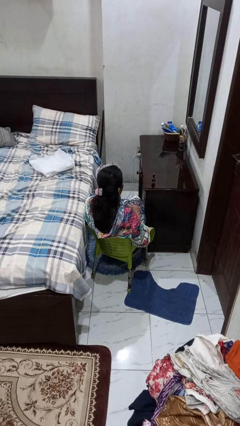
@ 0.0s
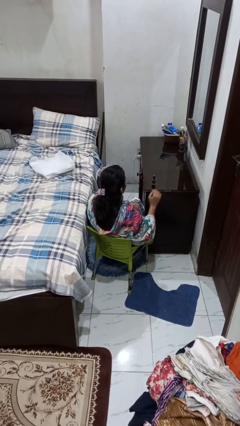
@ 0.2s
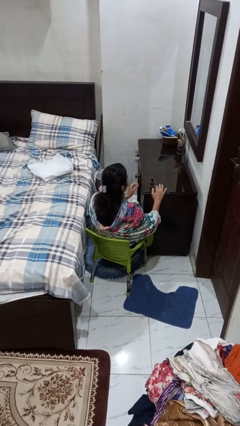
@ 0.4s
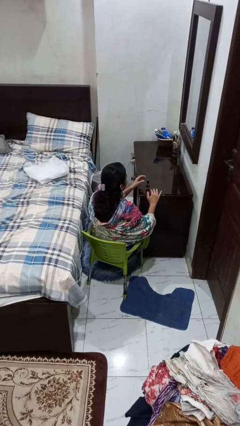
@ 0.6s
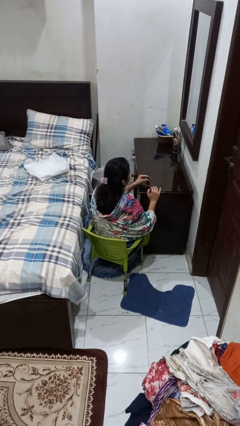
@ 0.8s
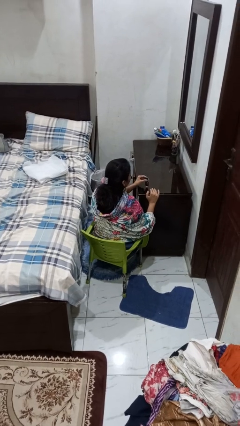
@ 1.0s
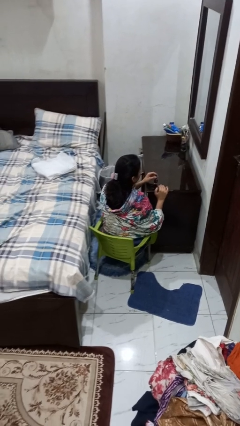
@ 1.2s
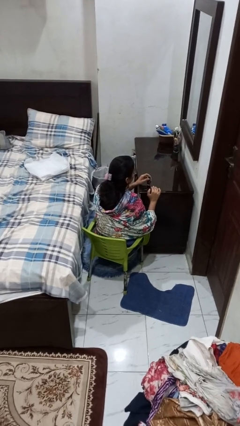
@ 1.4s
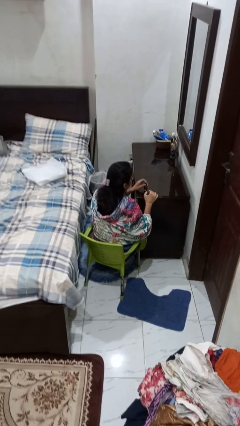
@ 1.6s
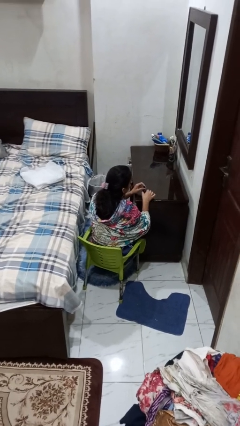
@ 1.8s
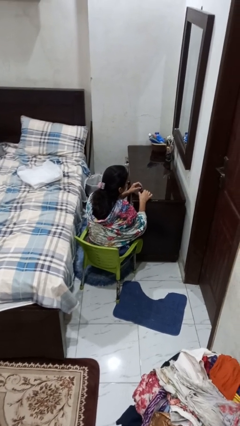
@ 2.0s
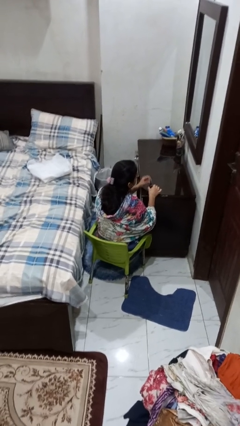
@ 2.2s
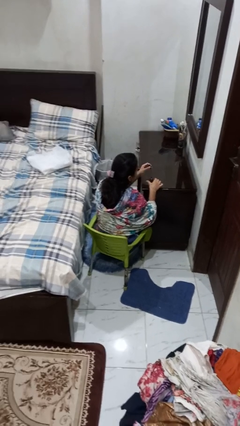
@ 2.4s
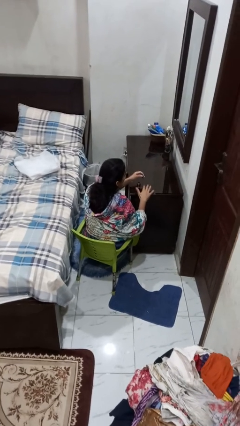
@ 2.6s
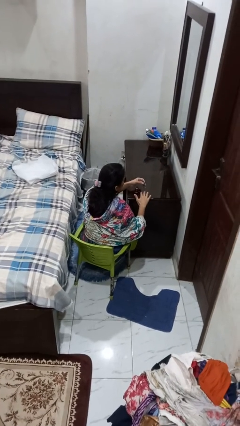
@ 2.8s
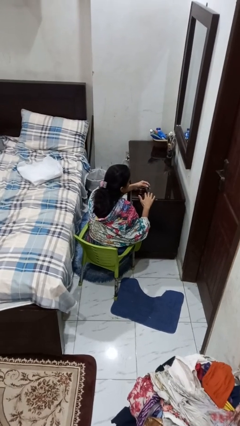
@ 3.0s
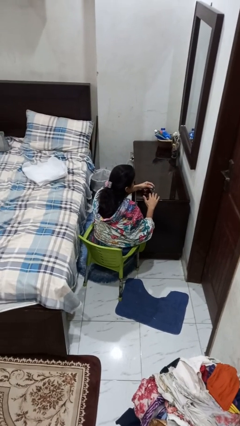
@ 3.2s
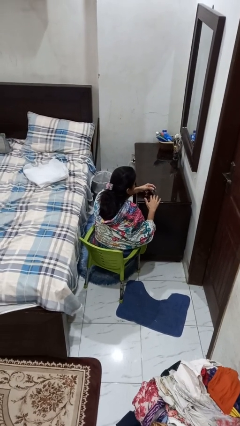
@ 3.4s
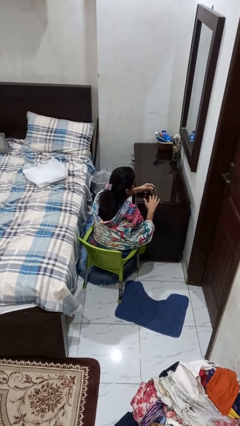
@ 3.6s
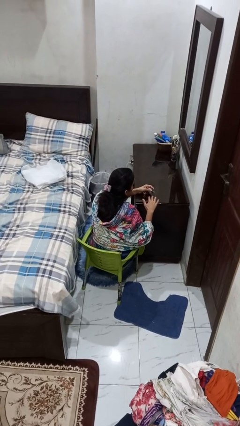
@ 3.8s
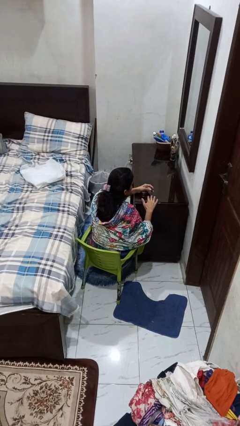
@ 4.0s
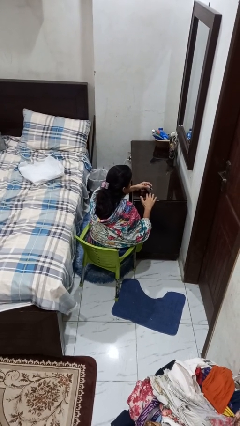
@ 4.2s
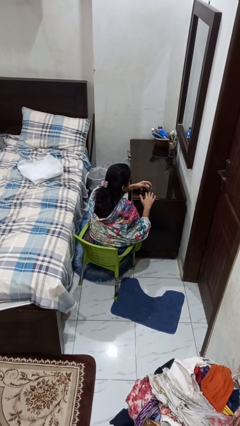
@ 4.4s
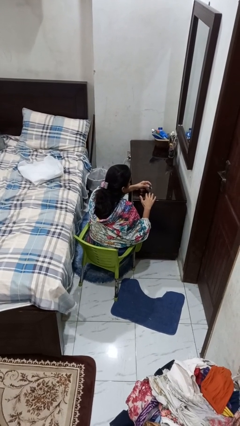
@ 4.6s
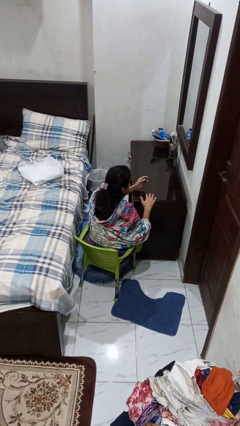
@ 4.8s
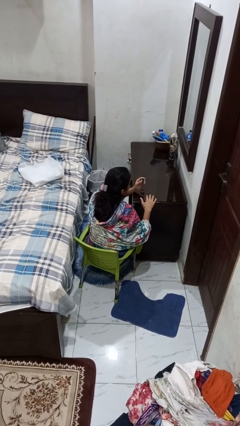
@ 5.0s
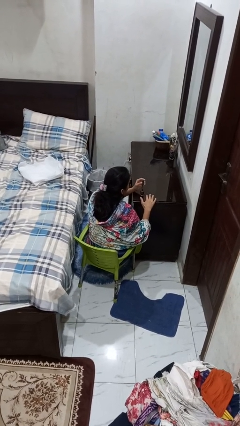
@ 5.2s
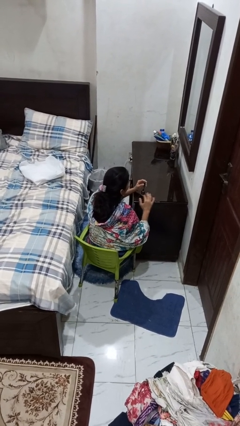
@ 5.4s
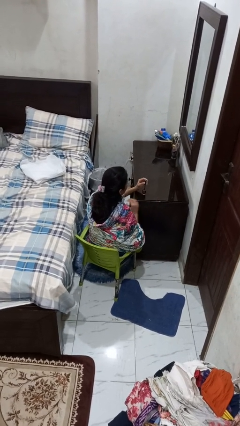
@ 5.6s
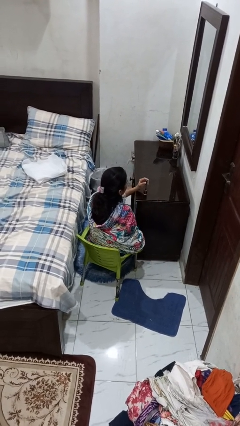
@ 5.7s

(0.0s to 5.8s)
person paints fingernails

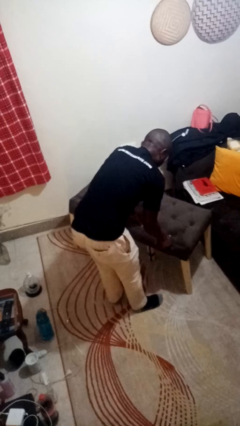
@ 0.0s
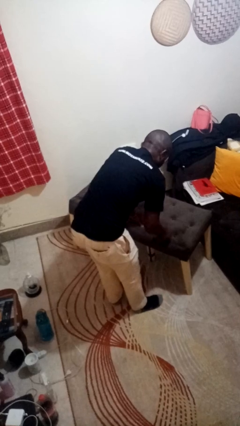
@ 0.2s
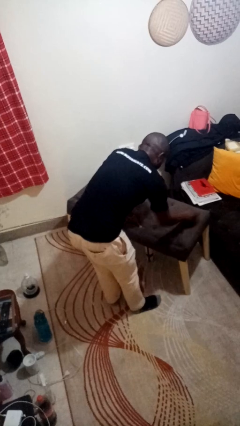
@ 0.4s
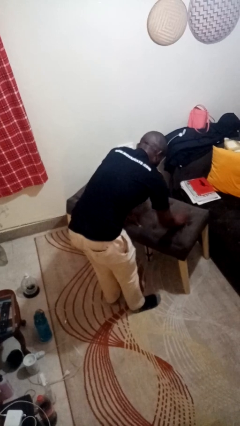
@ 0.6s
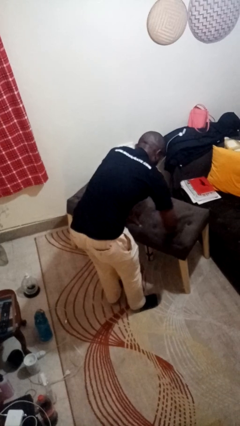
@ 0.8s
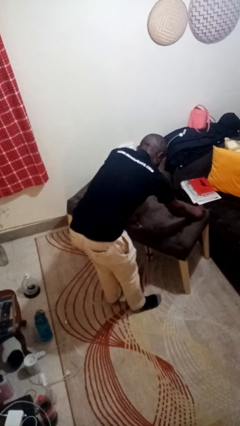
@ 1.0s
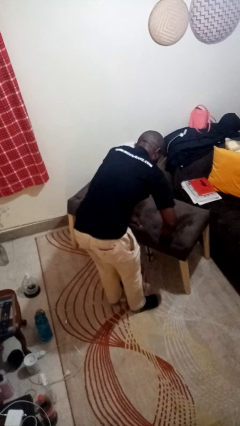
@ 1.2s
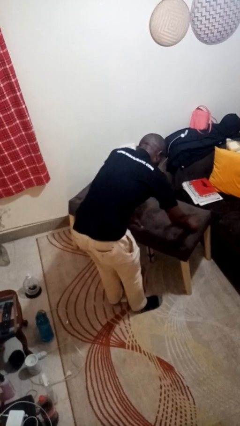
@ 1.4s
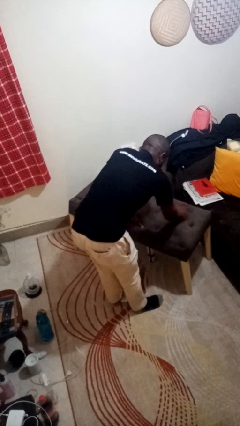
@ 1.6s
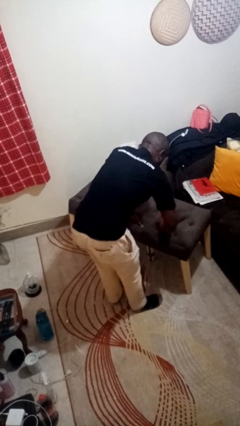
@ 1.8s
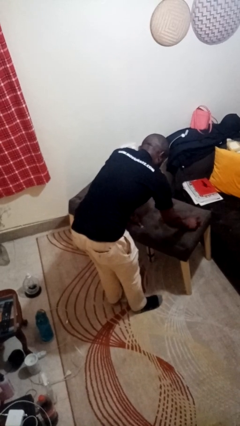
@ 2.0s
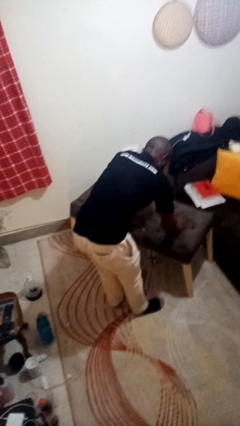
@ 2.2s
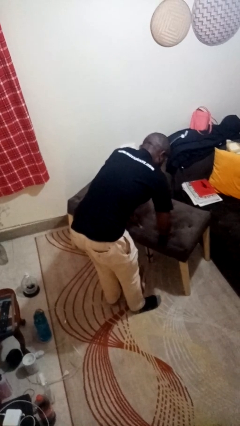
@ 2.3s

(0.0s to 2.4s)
person cleans table with rag

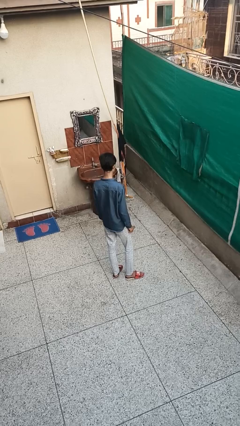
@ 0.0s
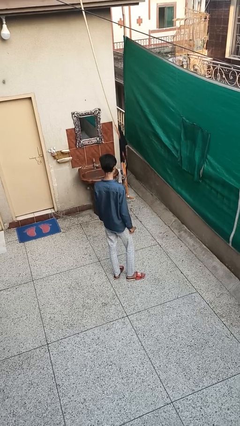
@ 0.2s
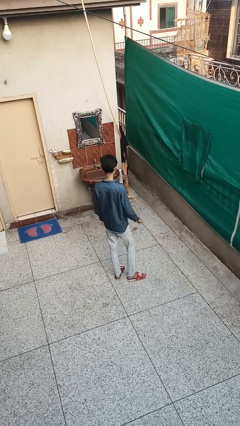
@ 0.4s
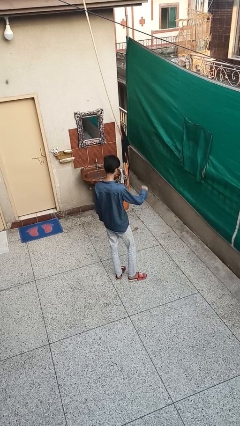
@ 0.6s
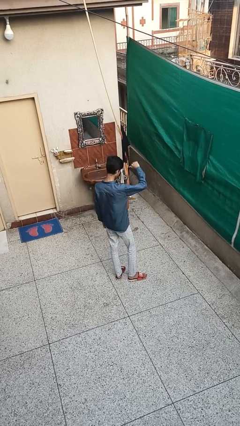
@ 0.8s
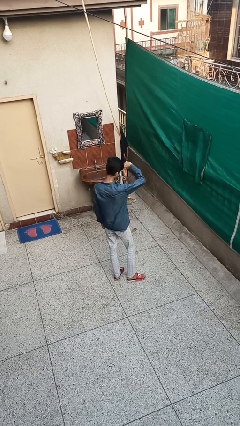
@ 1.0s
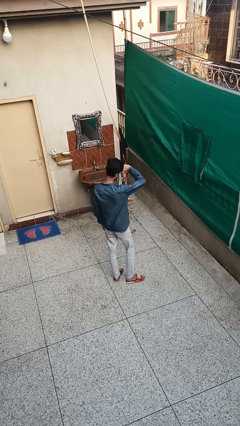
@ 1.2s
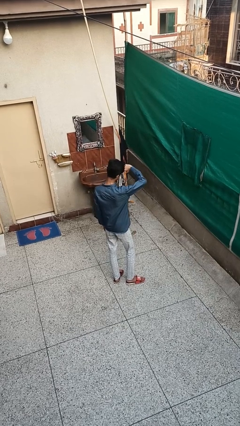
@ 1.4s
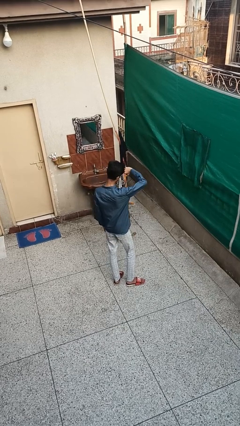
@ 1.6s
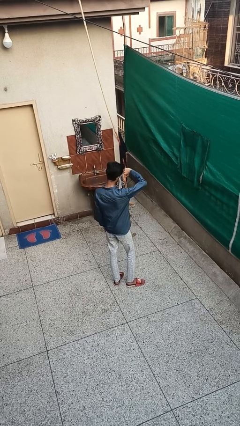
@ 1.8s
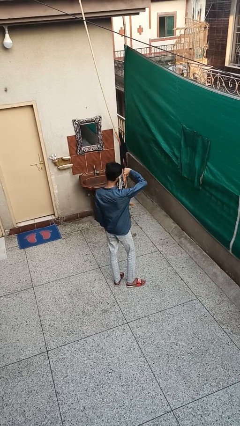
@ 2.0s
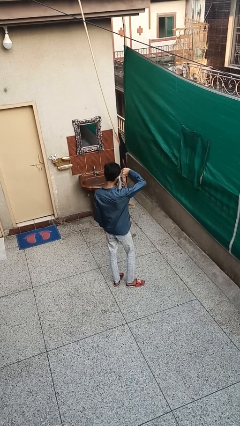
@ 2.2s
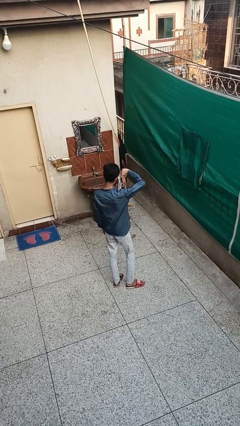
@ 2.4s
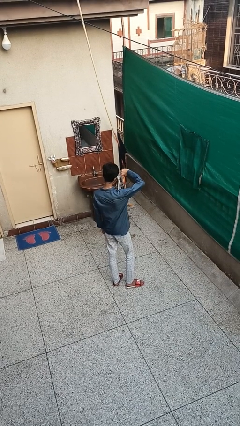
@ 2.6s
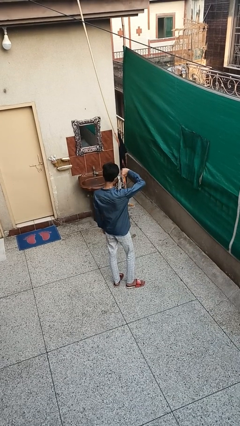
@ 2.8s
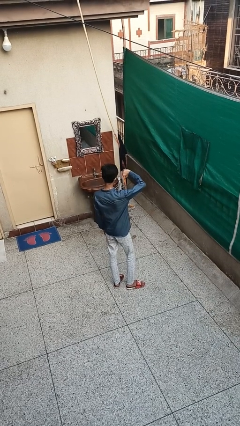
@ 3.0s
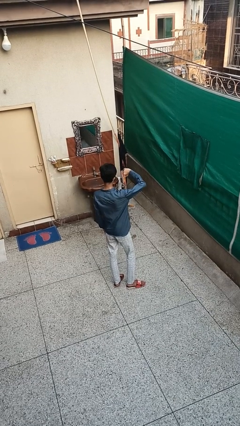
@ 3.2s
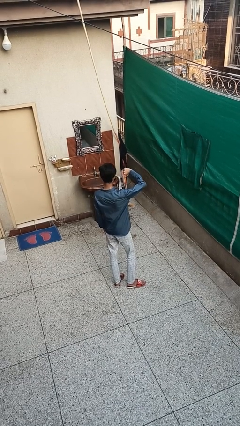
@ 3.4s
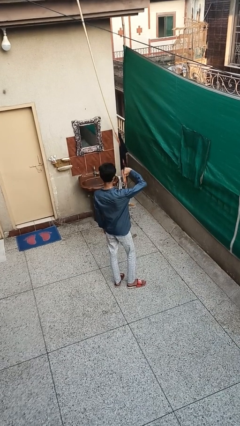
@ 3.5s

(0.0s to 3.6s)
person gestures thumbs down

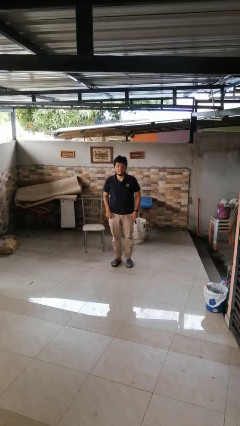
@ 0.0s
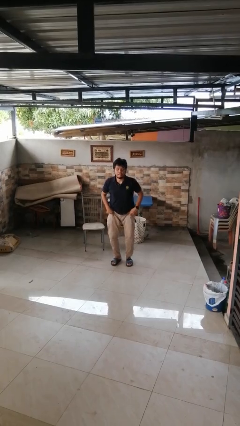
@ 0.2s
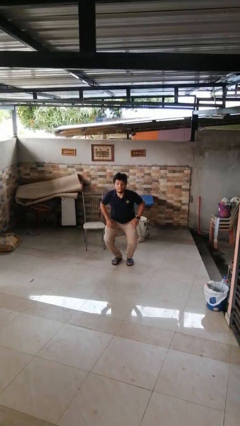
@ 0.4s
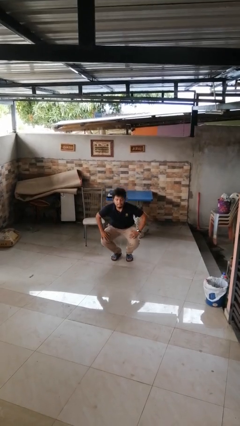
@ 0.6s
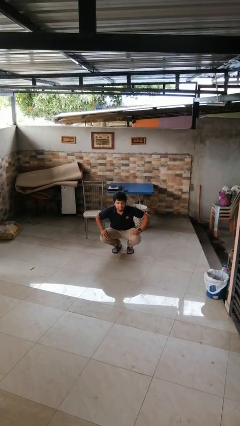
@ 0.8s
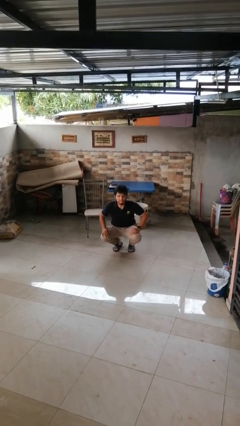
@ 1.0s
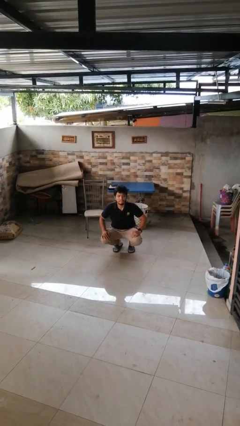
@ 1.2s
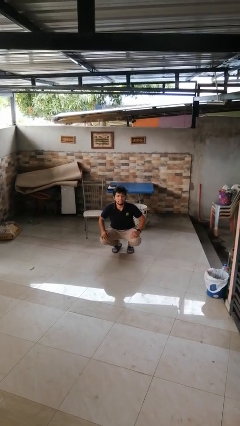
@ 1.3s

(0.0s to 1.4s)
person squats

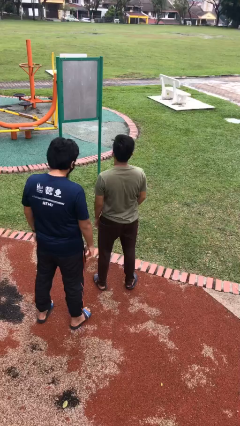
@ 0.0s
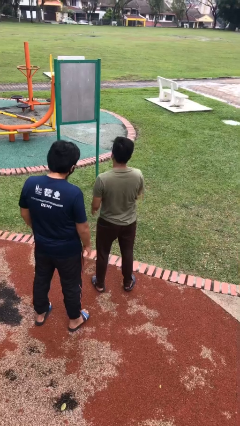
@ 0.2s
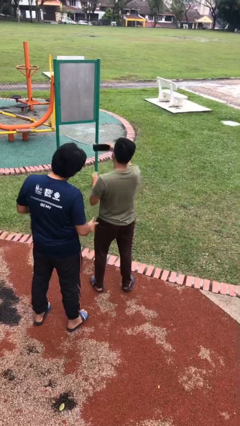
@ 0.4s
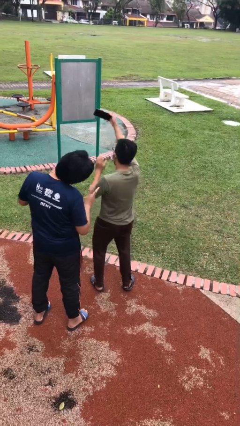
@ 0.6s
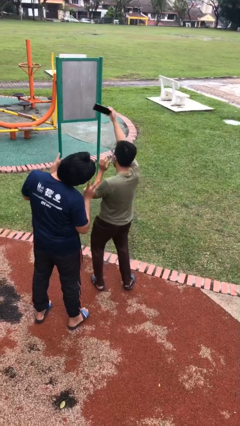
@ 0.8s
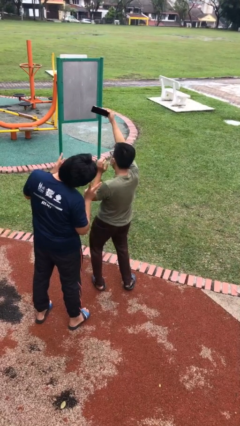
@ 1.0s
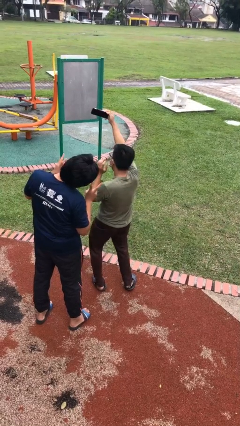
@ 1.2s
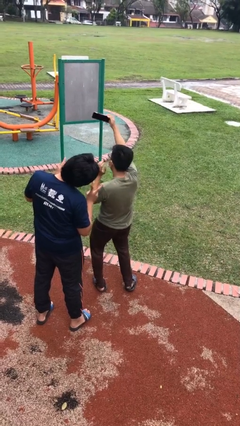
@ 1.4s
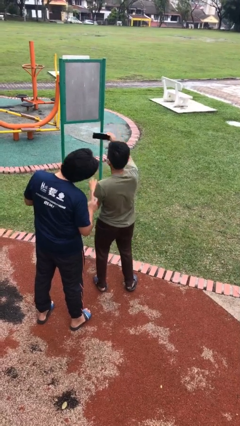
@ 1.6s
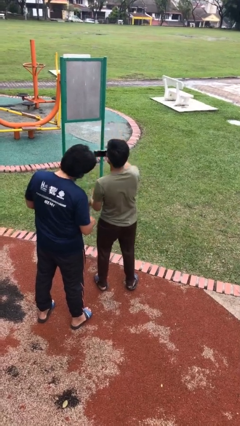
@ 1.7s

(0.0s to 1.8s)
person takes selfie with person

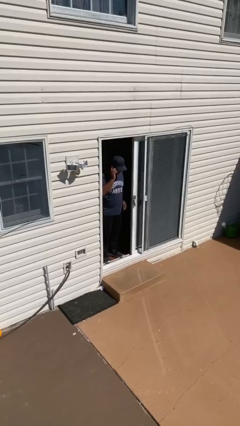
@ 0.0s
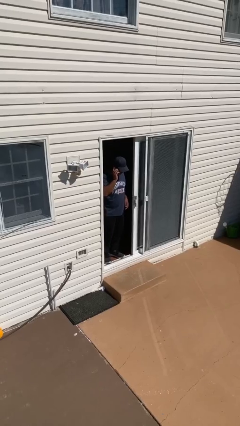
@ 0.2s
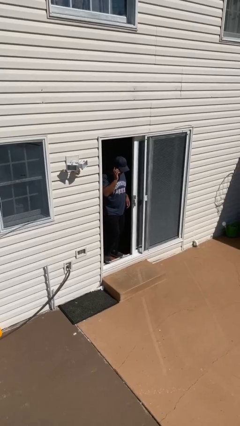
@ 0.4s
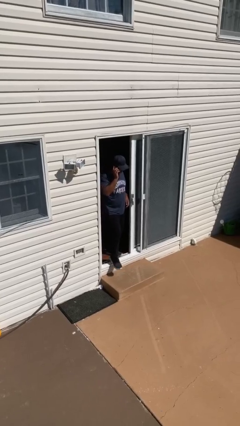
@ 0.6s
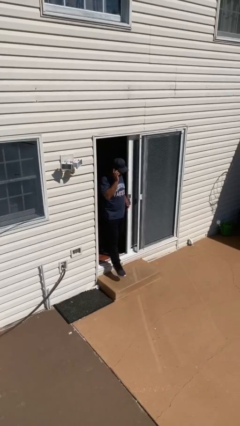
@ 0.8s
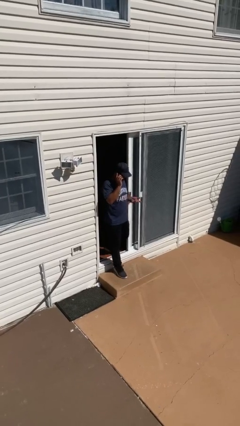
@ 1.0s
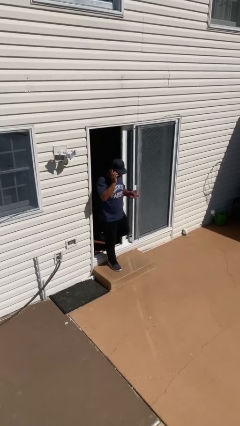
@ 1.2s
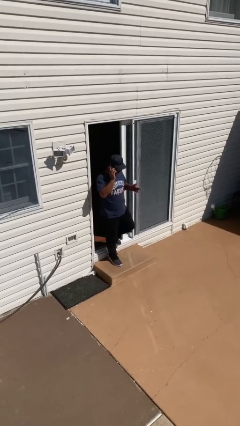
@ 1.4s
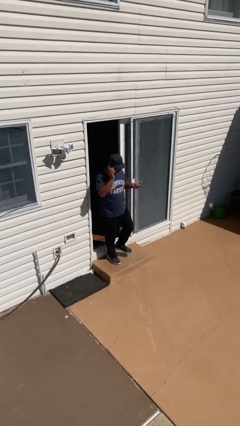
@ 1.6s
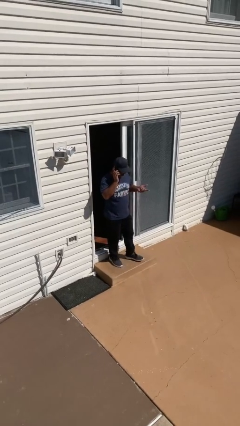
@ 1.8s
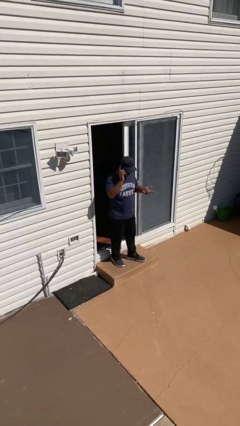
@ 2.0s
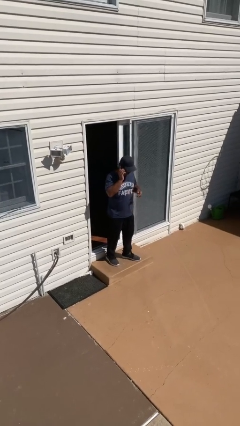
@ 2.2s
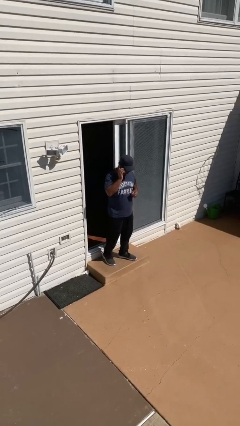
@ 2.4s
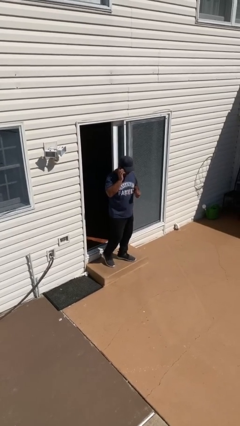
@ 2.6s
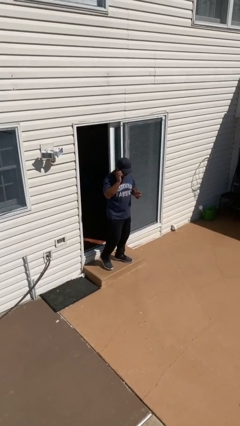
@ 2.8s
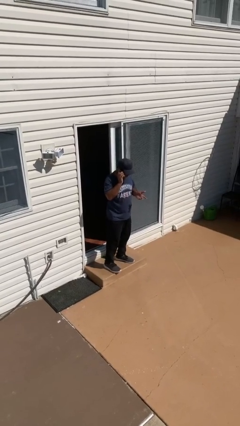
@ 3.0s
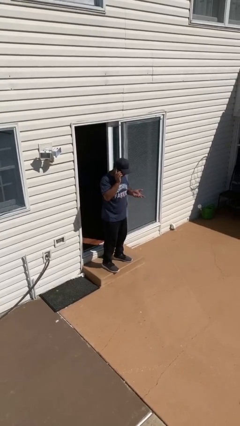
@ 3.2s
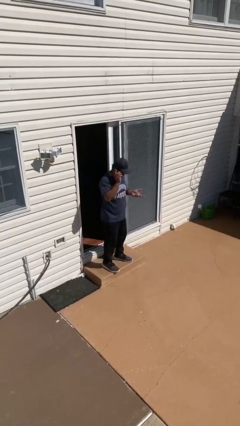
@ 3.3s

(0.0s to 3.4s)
person enters scene through structure
